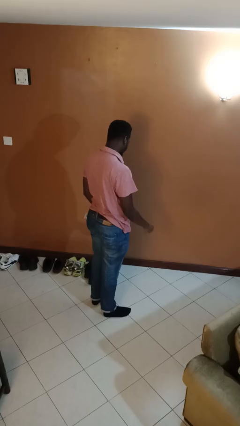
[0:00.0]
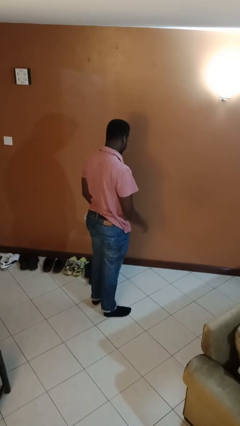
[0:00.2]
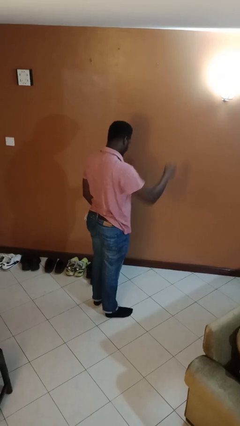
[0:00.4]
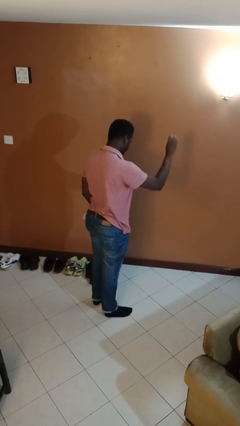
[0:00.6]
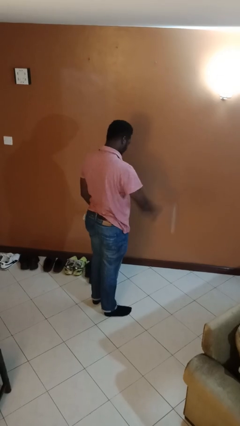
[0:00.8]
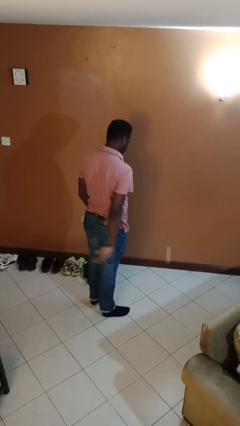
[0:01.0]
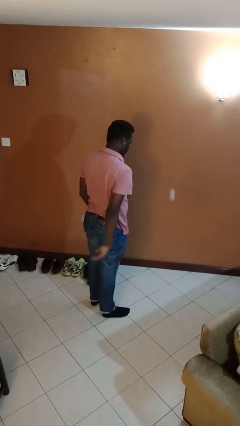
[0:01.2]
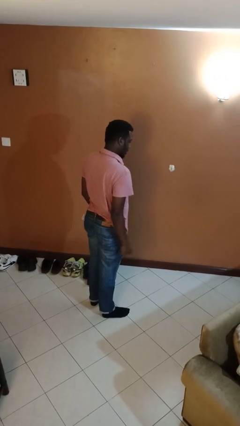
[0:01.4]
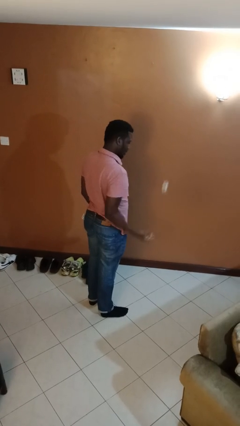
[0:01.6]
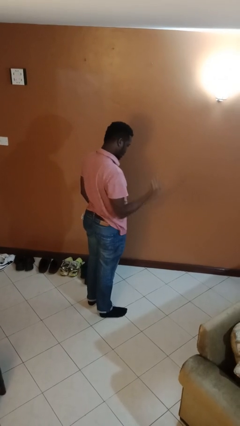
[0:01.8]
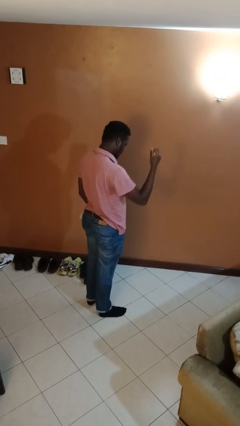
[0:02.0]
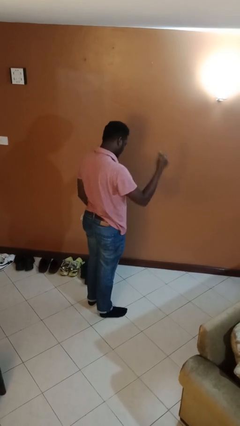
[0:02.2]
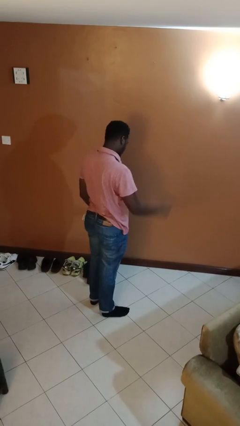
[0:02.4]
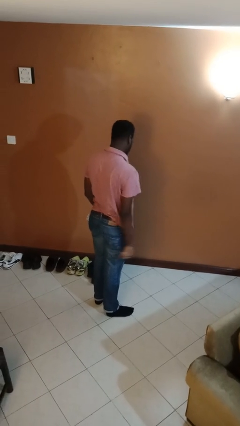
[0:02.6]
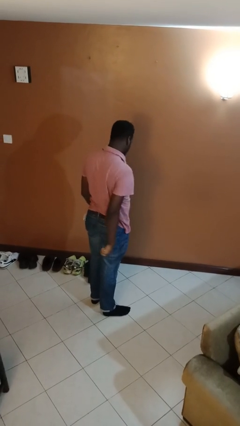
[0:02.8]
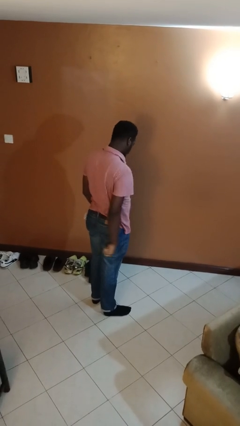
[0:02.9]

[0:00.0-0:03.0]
person bounces ball on floor

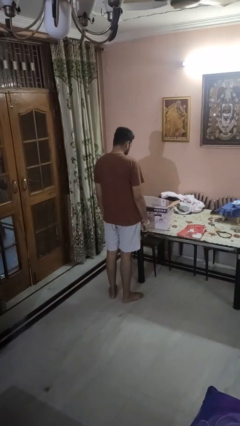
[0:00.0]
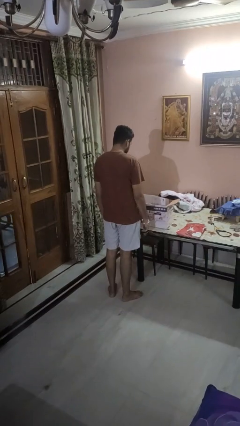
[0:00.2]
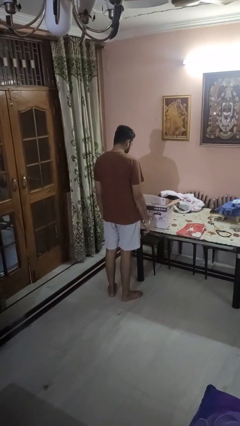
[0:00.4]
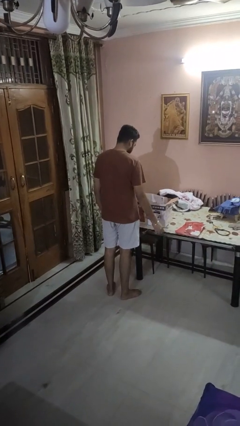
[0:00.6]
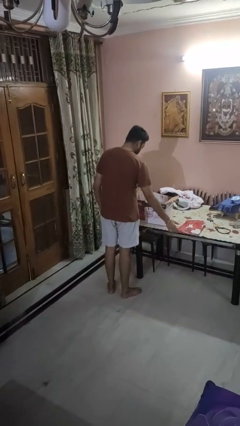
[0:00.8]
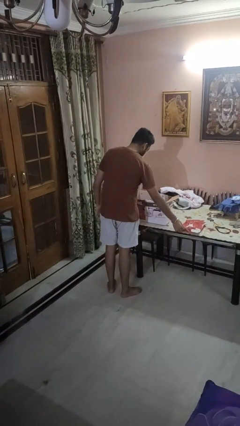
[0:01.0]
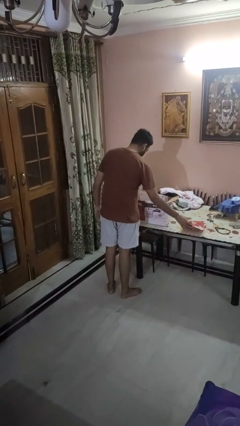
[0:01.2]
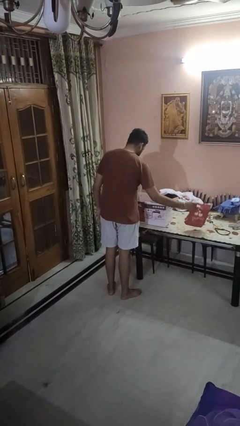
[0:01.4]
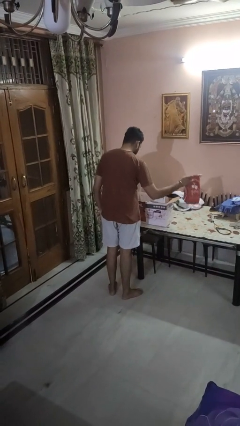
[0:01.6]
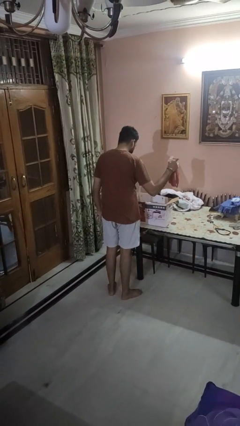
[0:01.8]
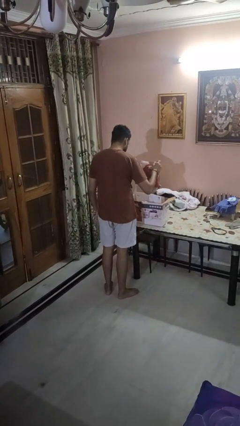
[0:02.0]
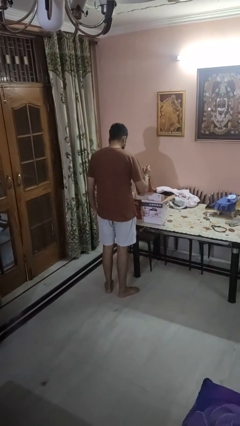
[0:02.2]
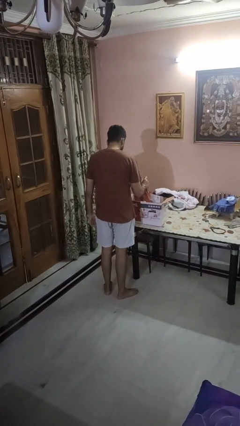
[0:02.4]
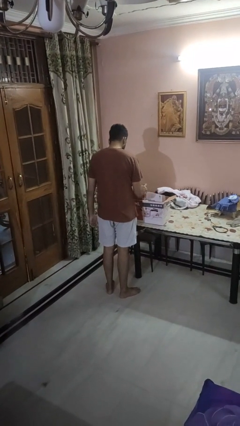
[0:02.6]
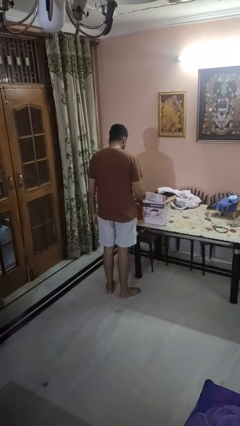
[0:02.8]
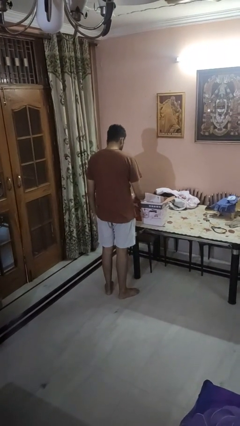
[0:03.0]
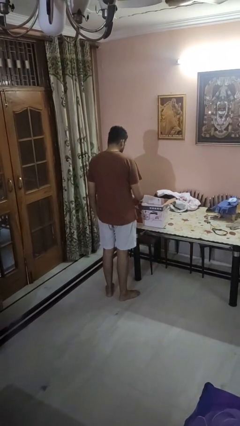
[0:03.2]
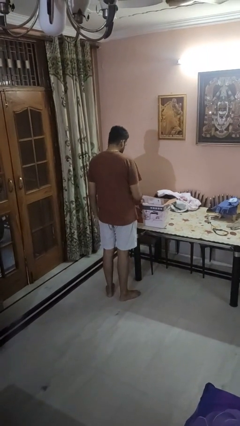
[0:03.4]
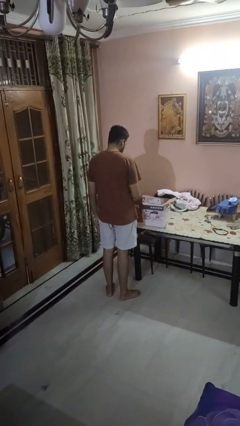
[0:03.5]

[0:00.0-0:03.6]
person puts object into box

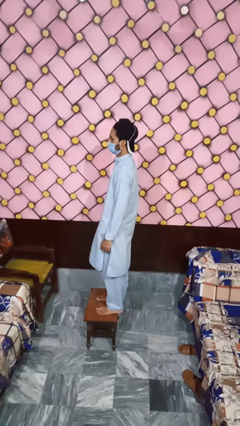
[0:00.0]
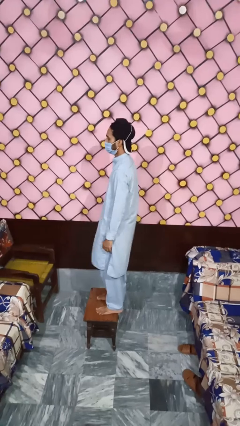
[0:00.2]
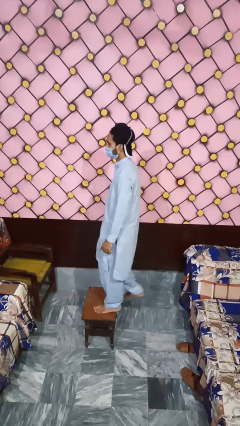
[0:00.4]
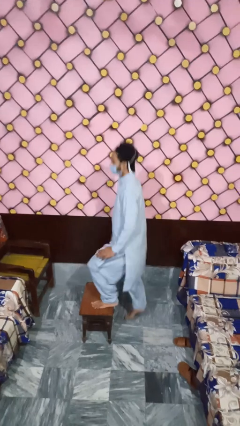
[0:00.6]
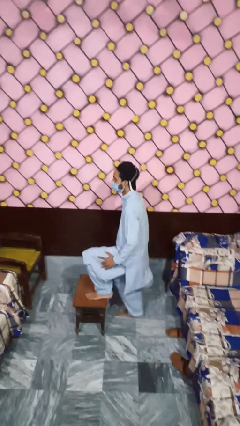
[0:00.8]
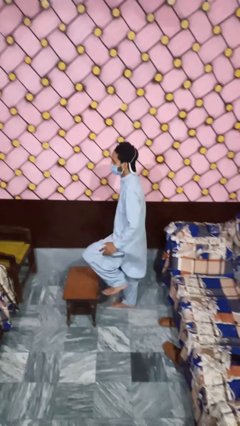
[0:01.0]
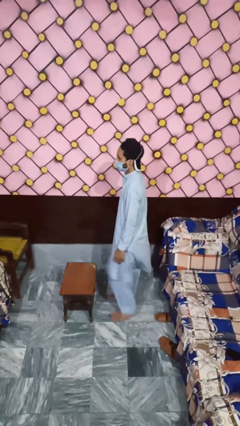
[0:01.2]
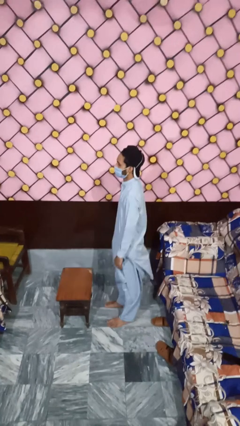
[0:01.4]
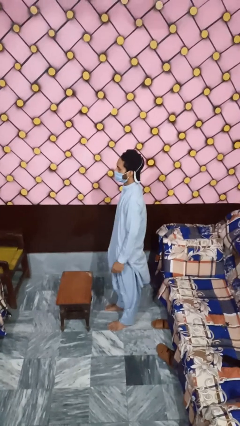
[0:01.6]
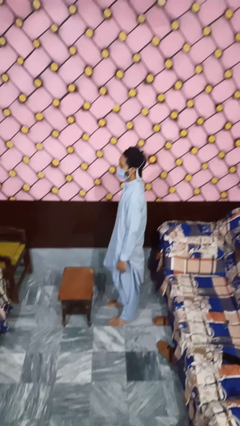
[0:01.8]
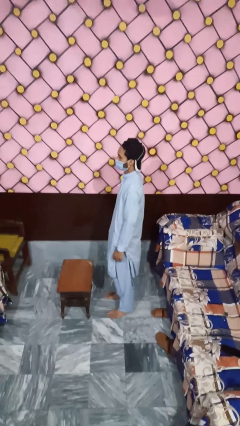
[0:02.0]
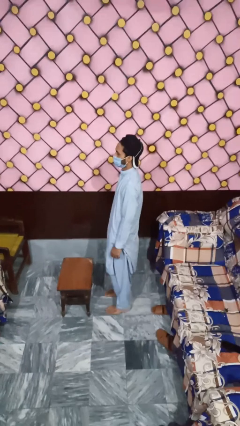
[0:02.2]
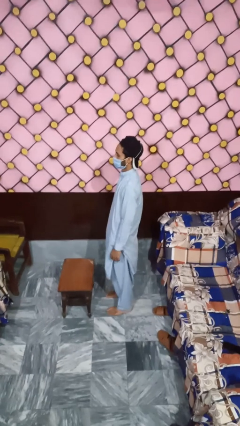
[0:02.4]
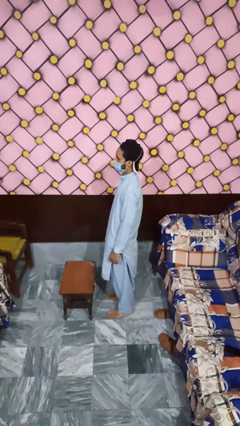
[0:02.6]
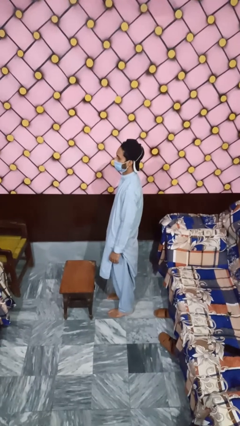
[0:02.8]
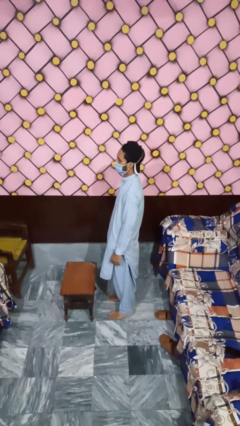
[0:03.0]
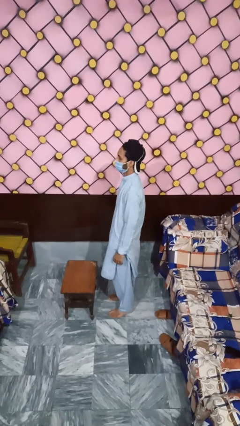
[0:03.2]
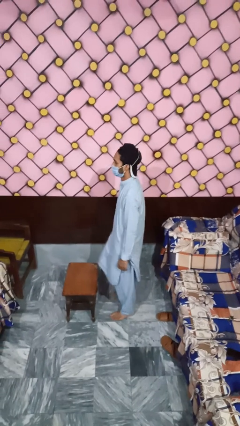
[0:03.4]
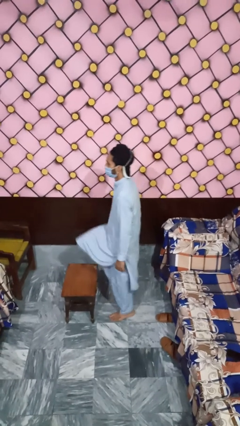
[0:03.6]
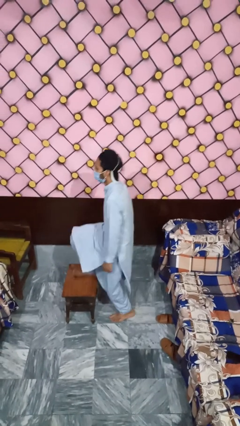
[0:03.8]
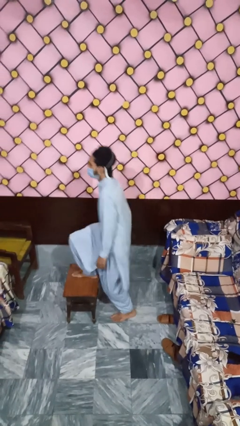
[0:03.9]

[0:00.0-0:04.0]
person climbs off table

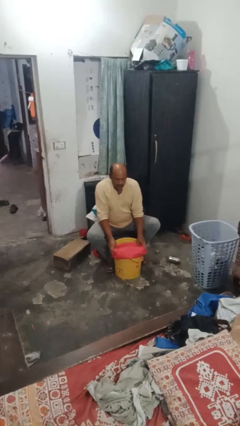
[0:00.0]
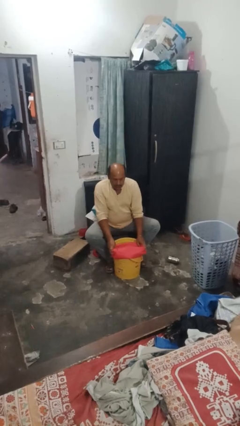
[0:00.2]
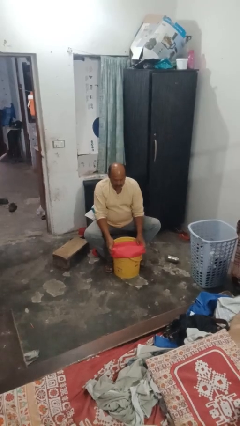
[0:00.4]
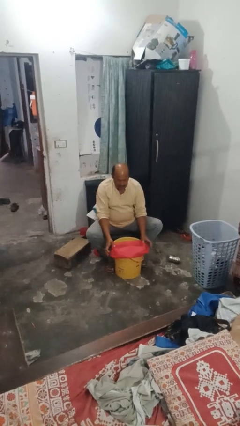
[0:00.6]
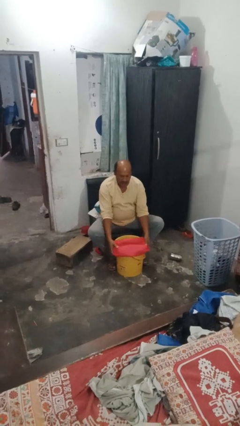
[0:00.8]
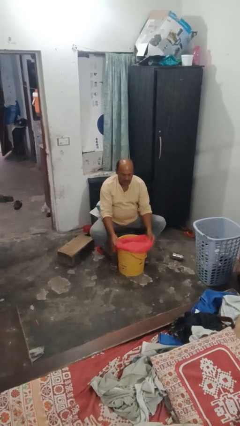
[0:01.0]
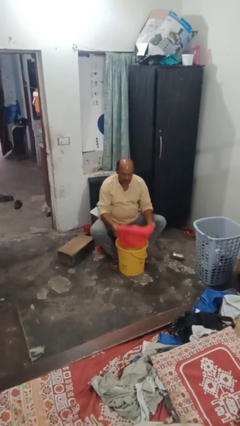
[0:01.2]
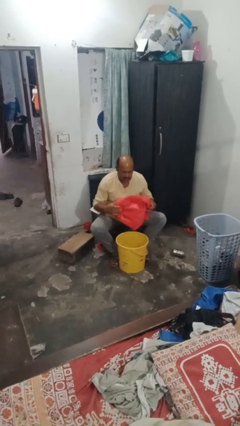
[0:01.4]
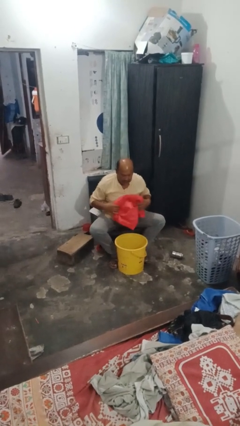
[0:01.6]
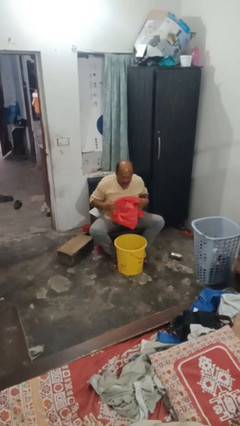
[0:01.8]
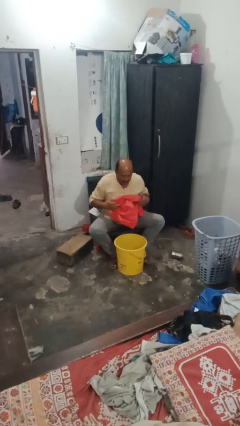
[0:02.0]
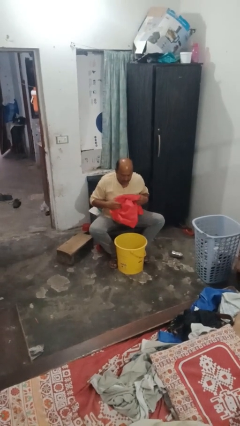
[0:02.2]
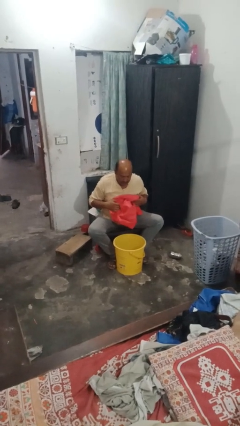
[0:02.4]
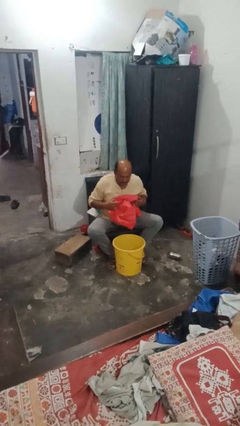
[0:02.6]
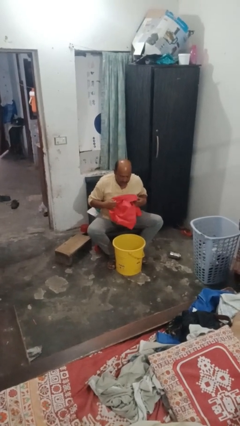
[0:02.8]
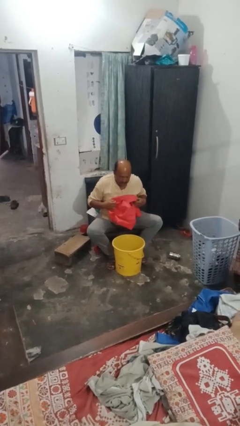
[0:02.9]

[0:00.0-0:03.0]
person removes trashbag from trashcan

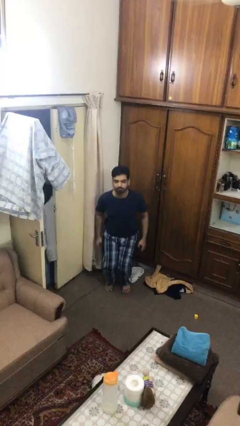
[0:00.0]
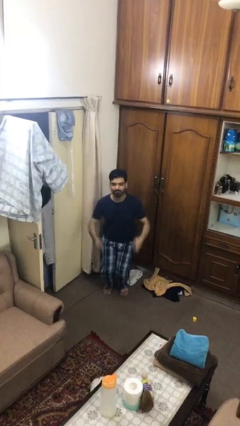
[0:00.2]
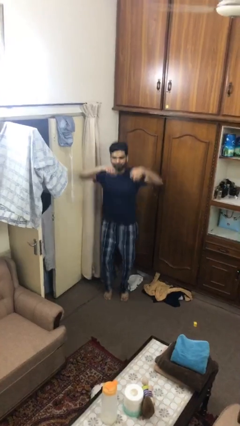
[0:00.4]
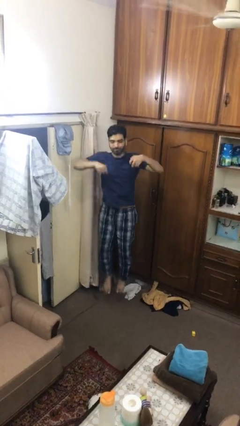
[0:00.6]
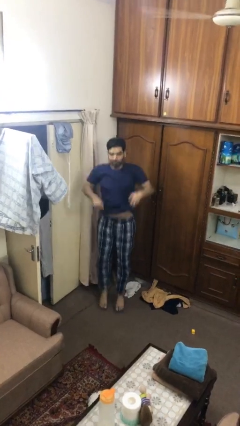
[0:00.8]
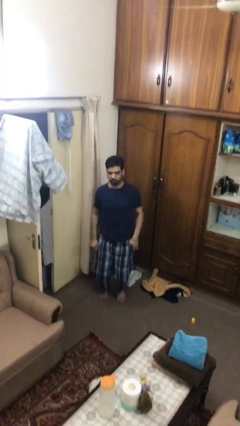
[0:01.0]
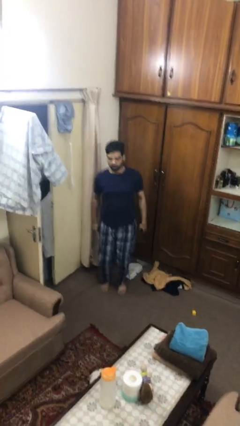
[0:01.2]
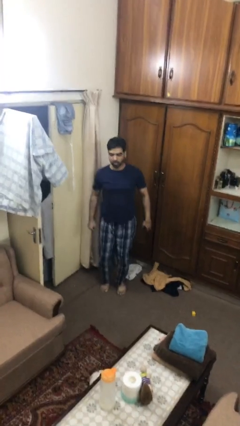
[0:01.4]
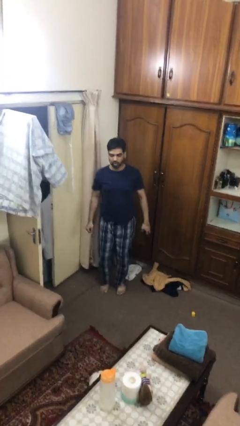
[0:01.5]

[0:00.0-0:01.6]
person jumps

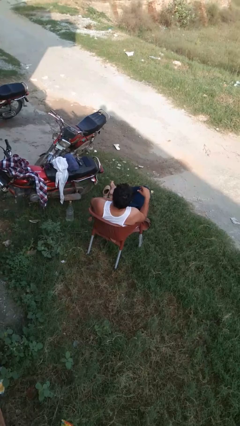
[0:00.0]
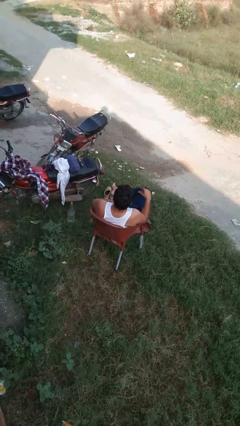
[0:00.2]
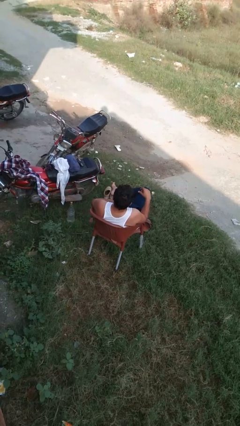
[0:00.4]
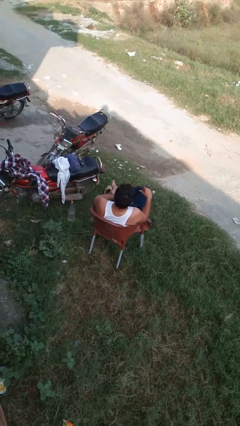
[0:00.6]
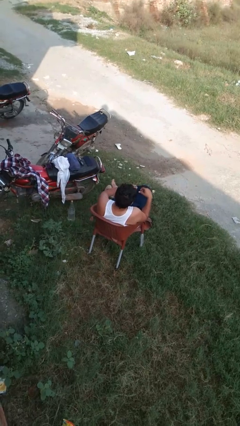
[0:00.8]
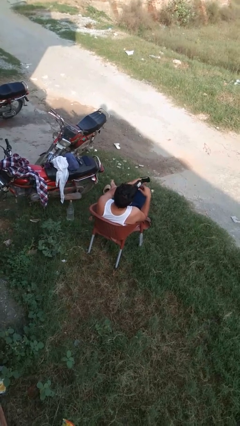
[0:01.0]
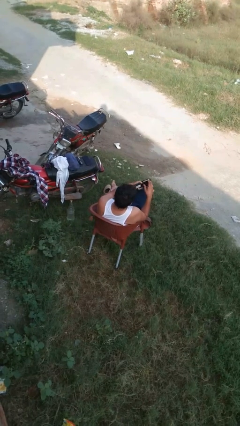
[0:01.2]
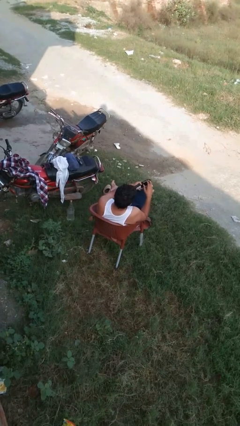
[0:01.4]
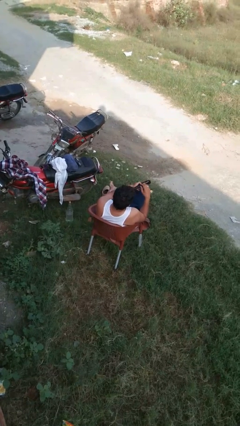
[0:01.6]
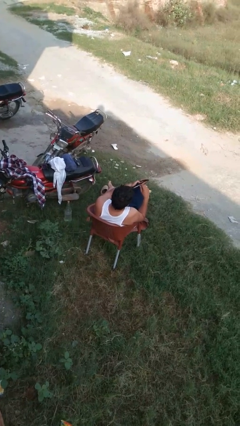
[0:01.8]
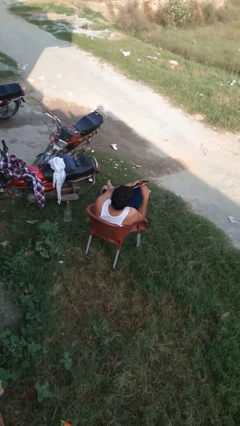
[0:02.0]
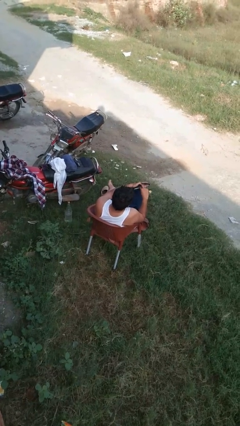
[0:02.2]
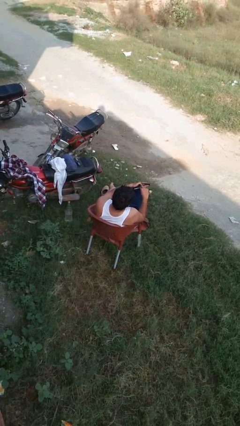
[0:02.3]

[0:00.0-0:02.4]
person searches in purse
